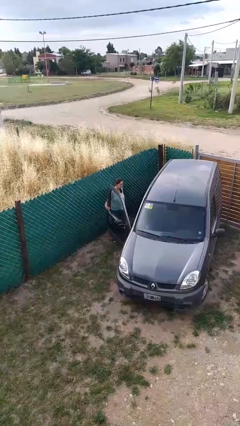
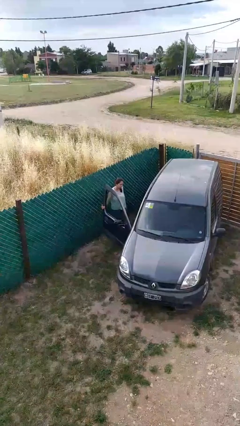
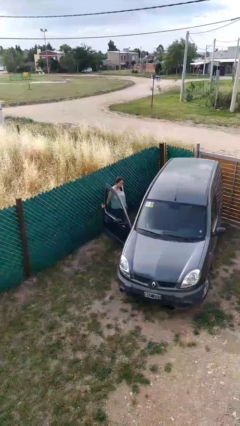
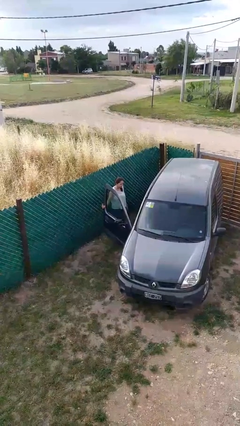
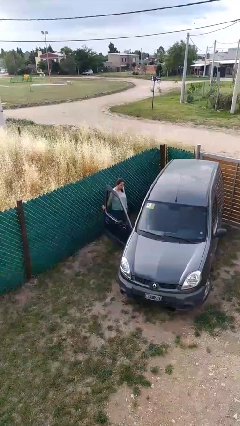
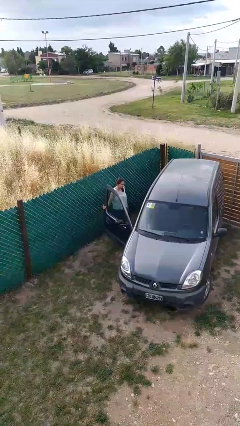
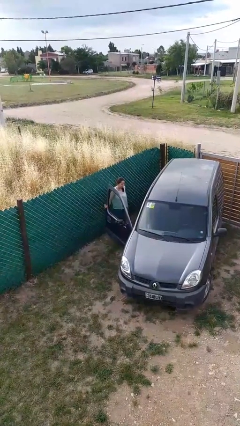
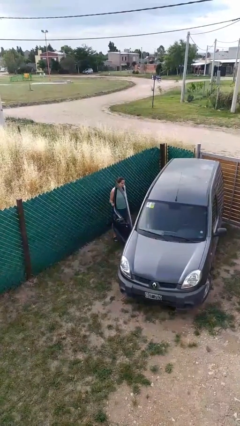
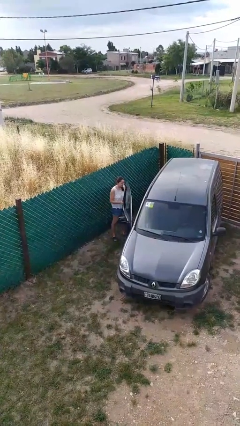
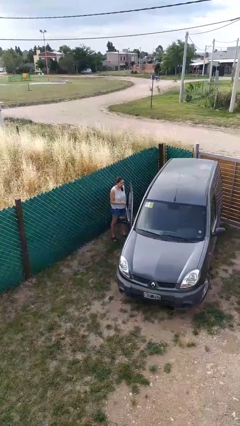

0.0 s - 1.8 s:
person opens car door

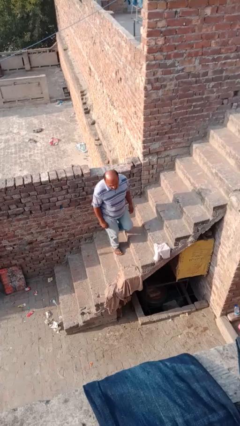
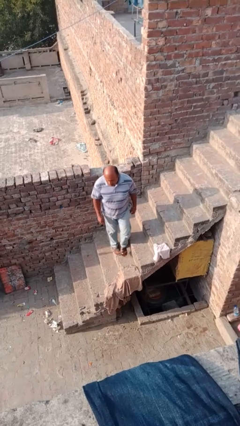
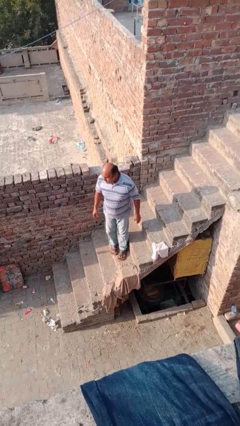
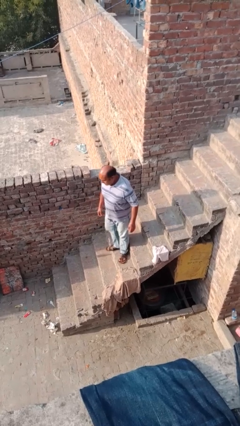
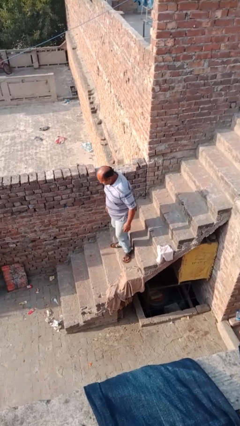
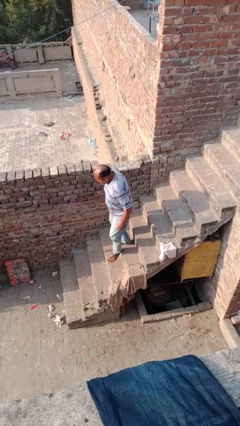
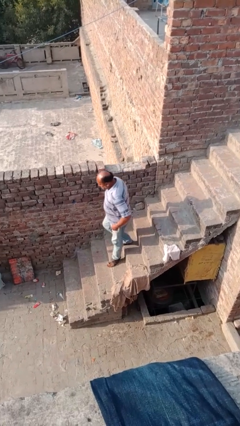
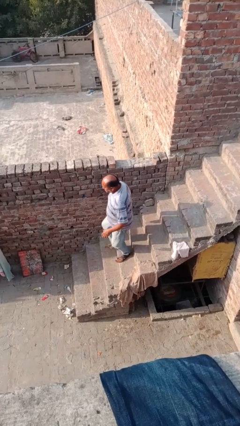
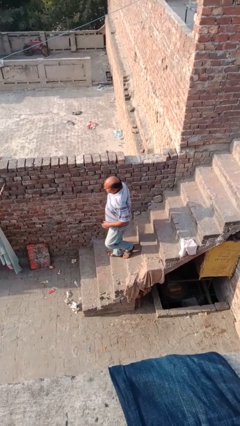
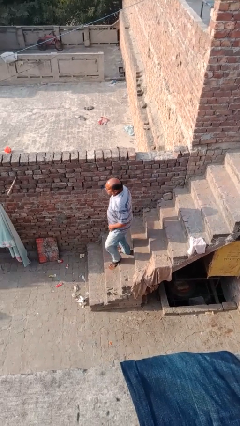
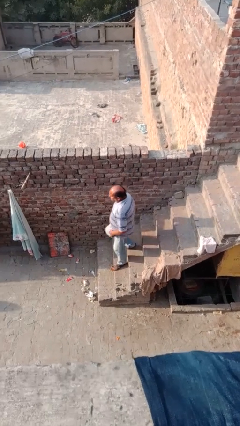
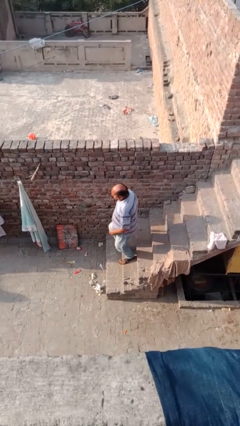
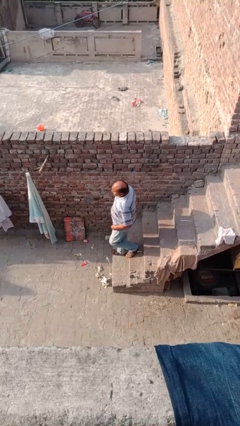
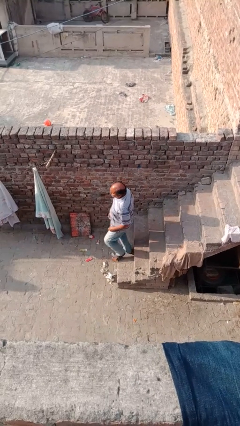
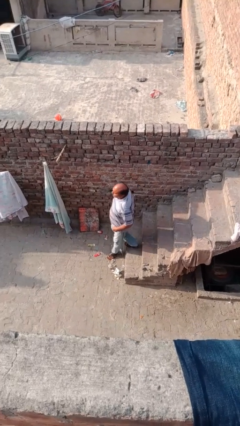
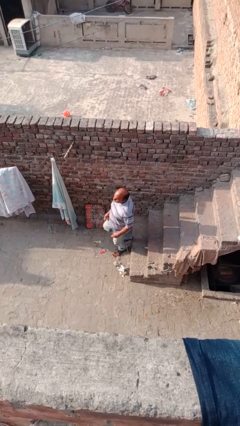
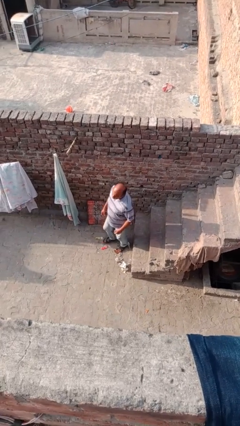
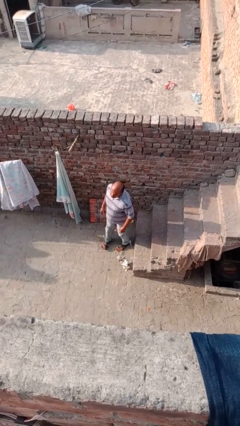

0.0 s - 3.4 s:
person climbs down stairs

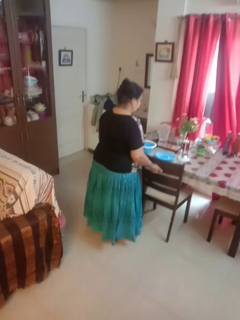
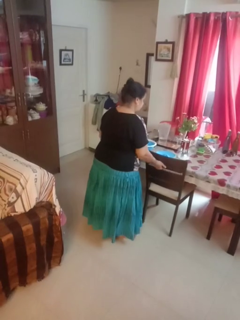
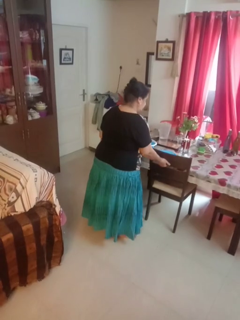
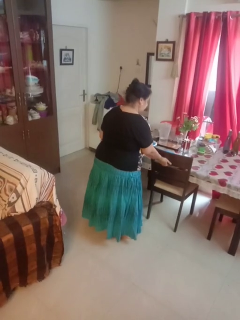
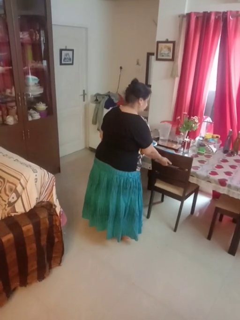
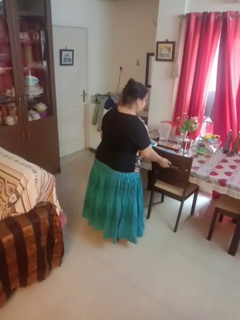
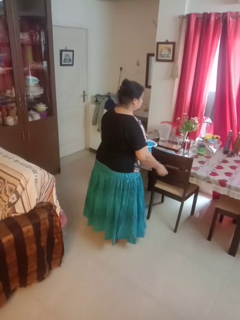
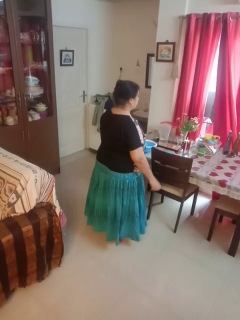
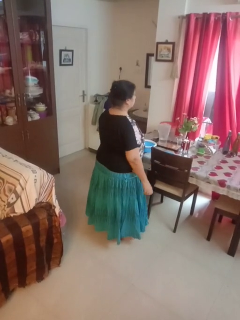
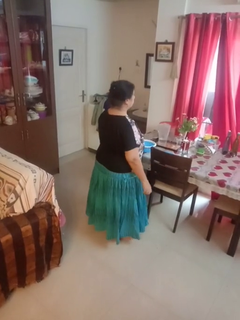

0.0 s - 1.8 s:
person pushes in chair

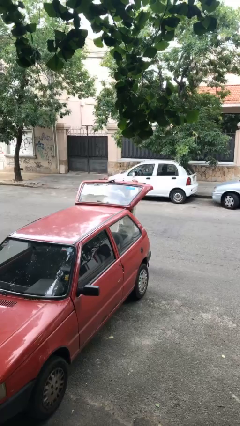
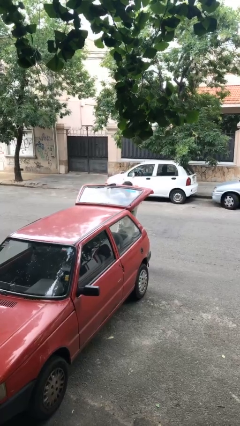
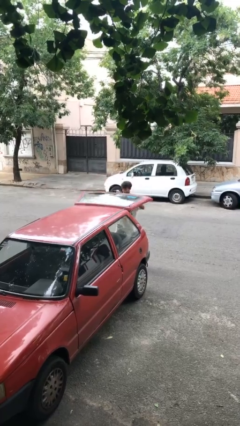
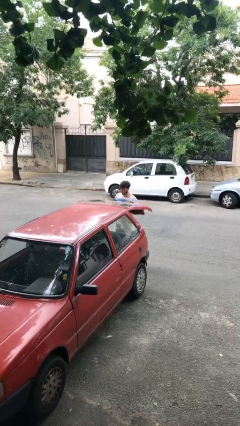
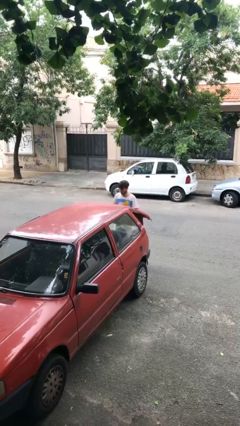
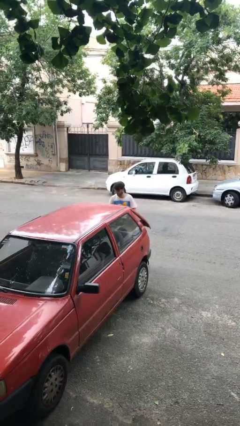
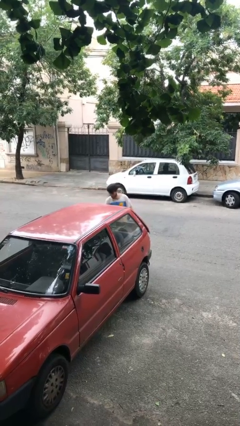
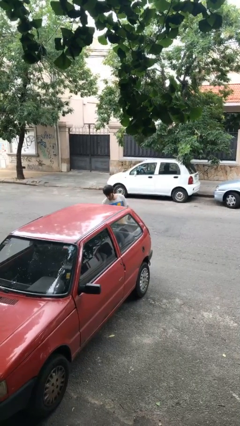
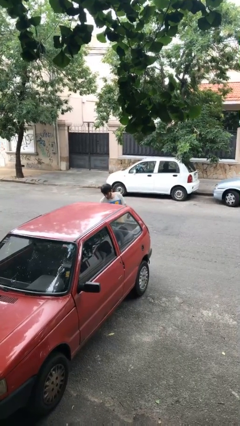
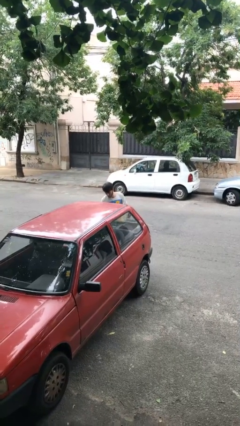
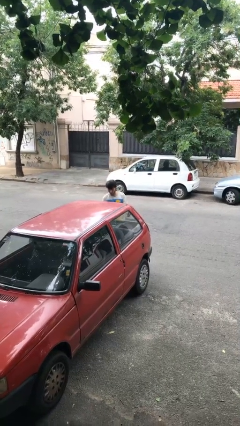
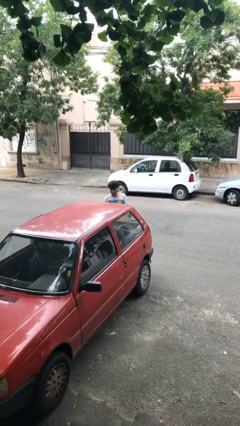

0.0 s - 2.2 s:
person closes car trunk

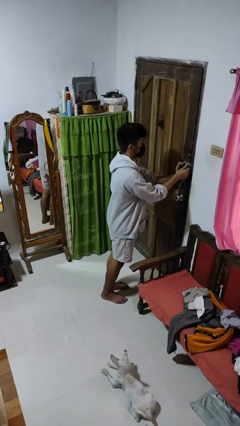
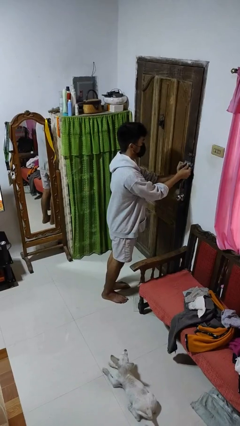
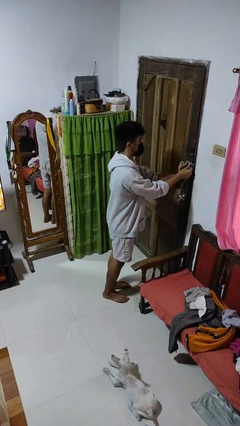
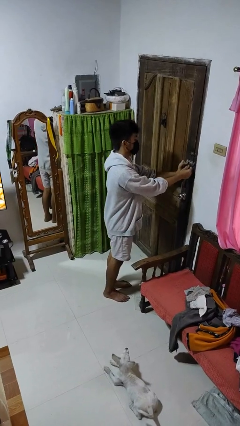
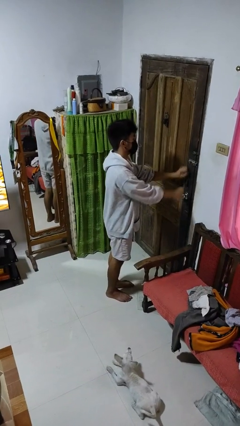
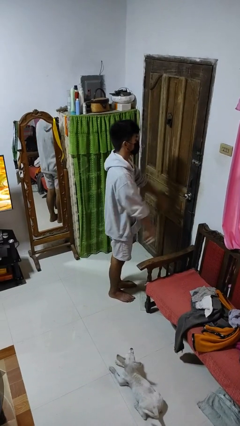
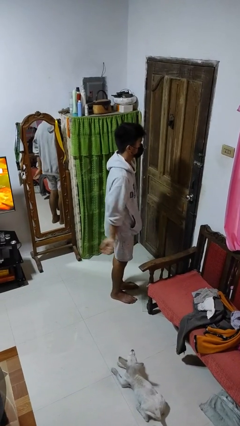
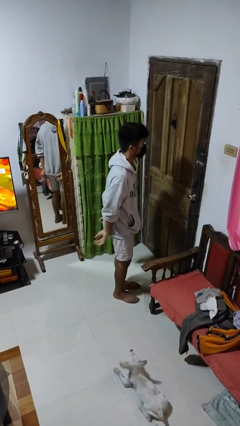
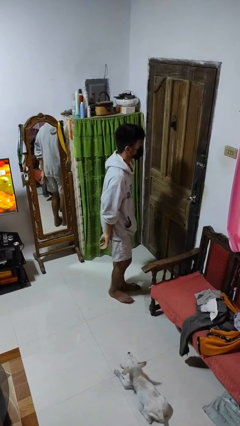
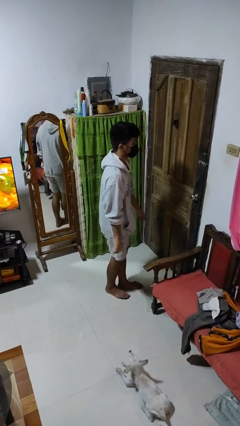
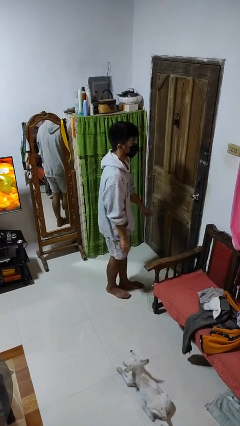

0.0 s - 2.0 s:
person locks door with keys

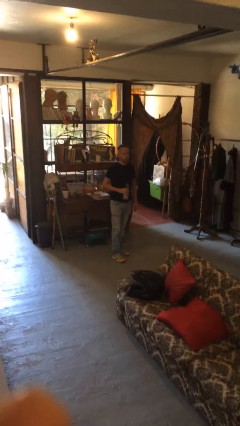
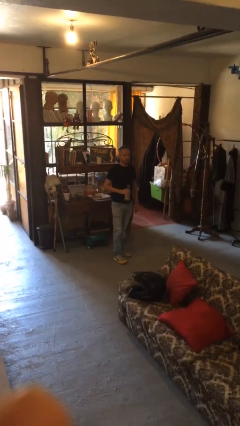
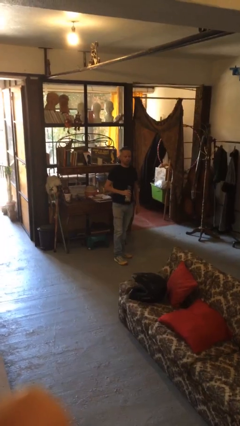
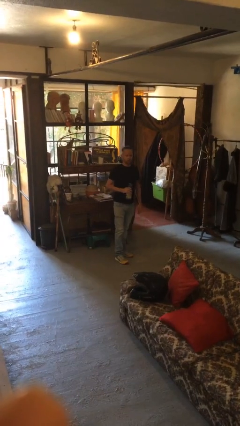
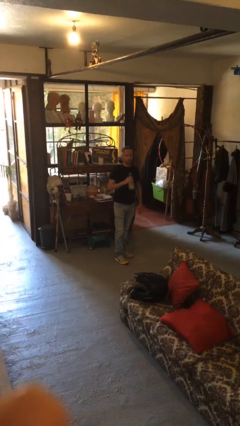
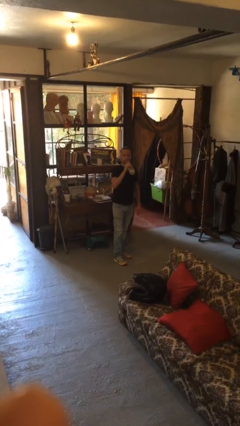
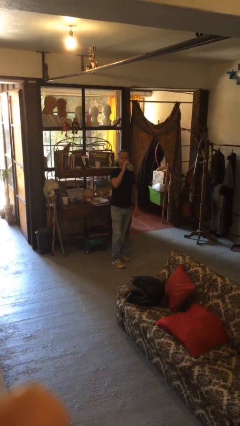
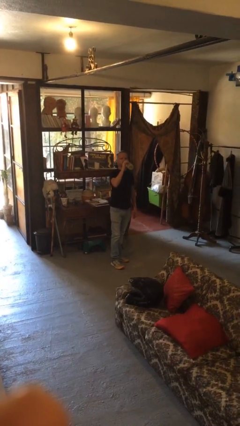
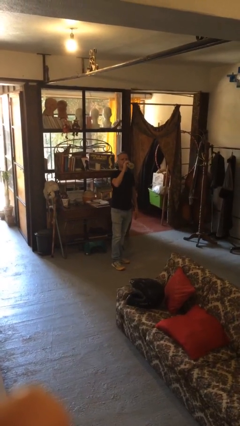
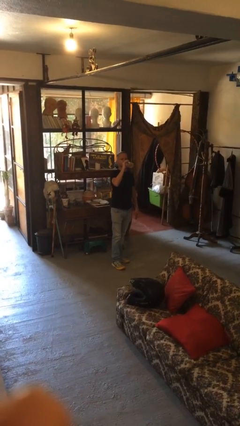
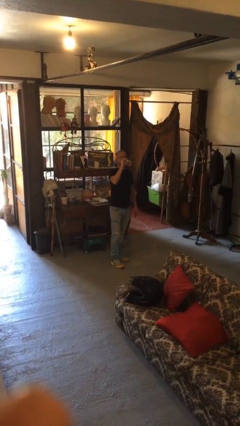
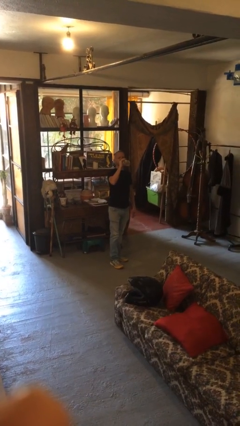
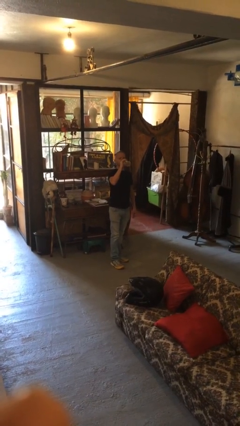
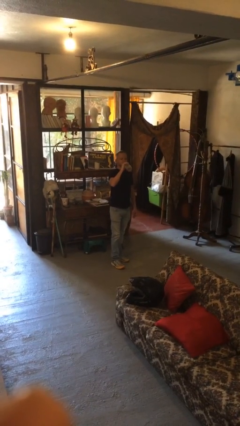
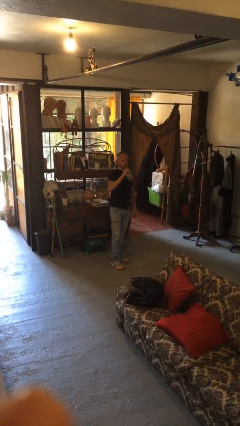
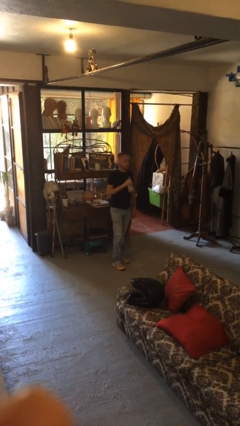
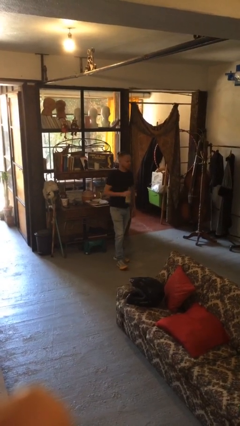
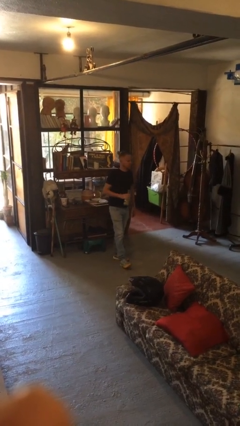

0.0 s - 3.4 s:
person drinks from bottle

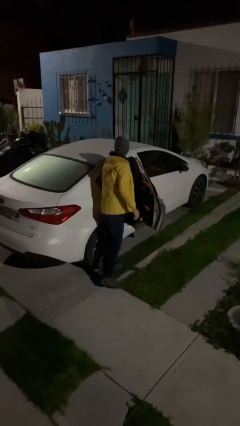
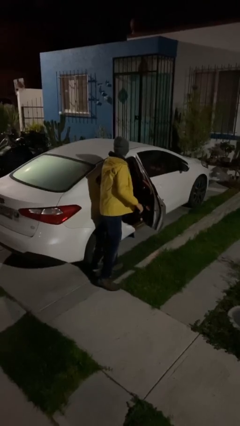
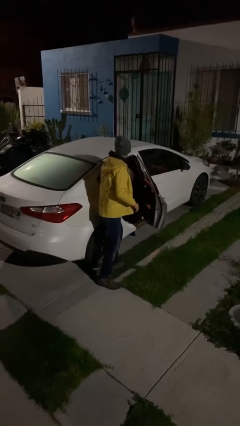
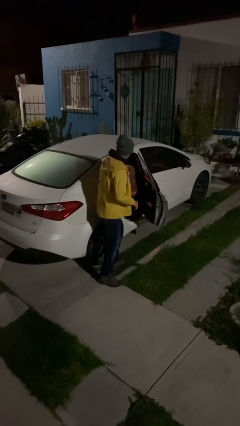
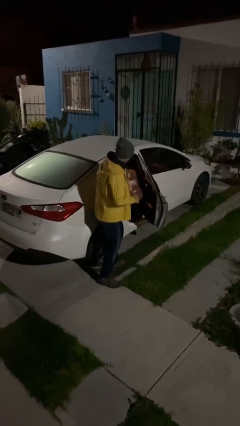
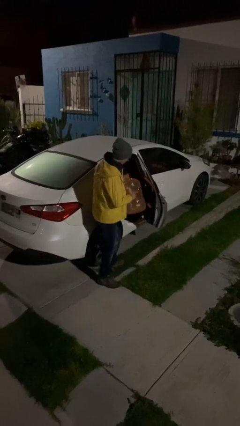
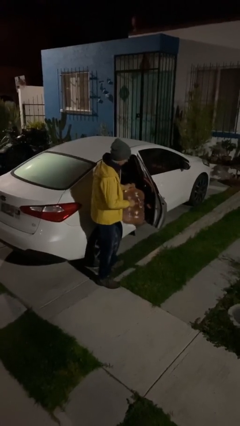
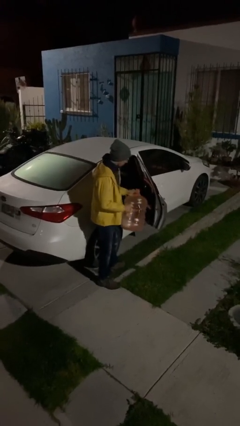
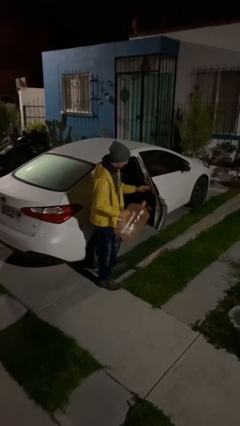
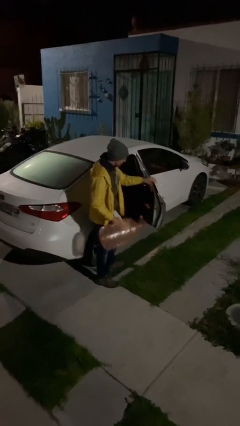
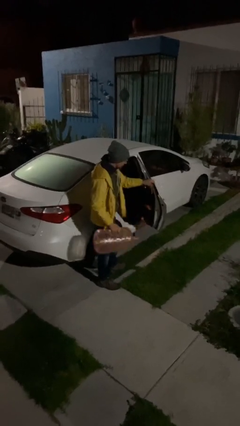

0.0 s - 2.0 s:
person unloads car

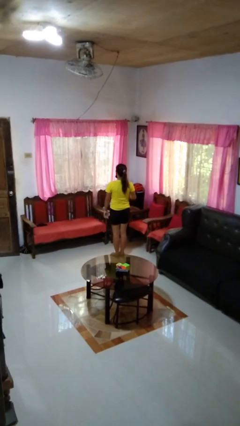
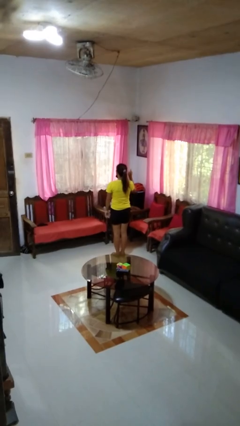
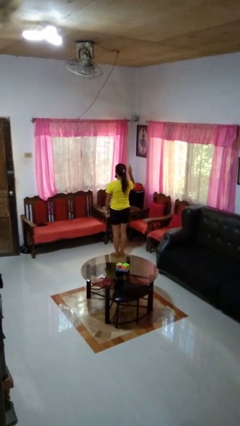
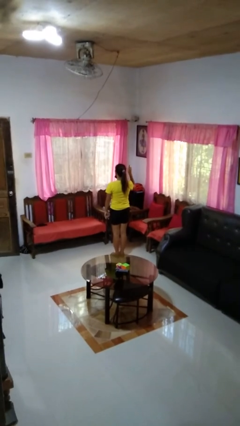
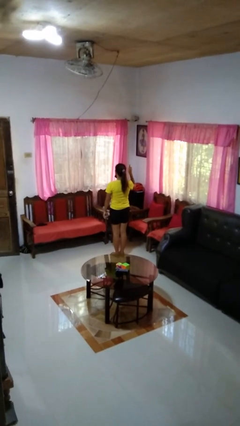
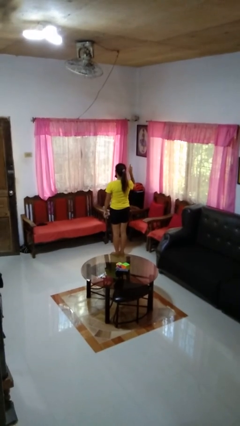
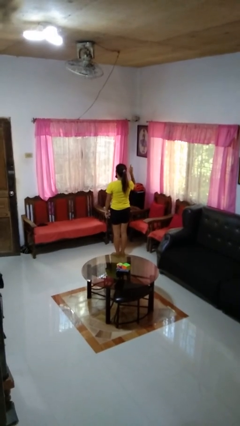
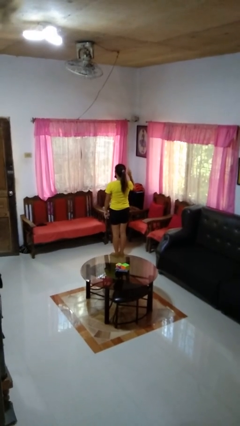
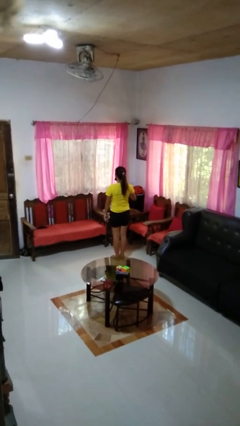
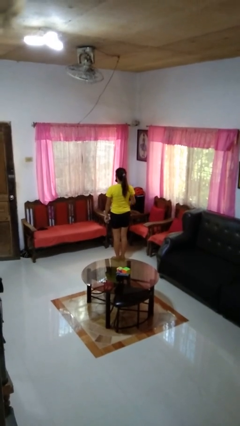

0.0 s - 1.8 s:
person gestures number one
